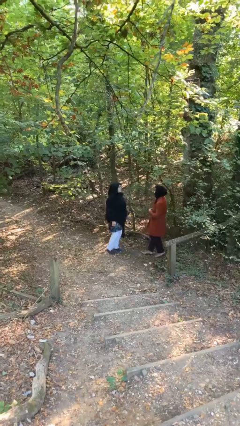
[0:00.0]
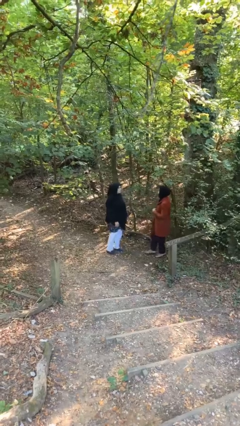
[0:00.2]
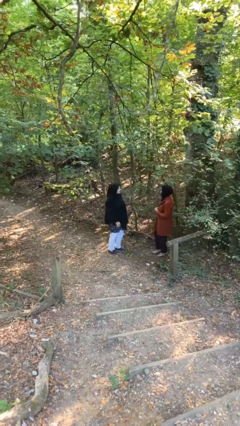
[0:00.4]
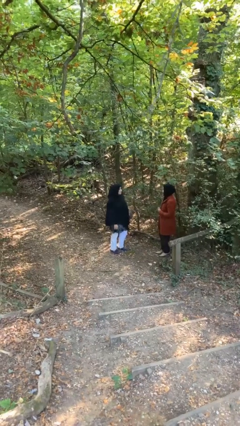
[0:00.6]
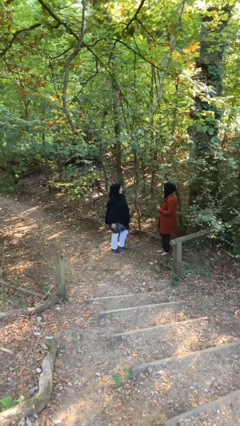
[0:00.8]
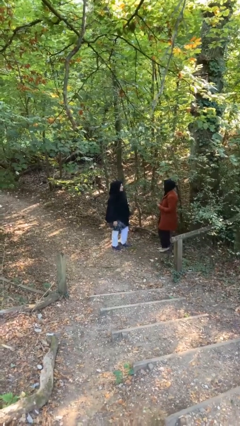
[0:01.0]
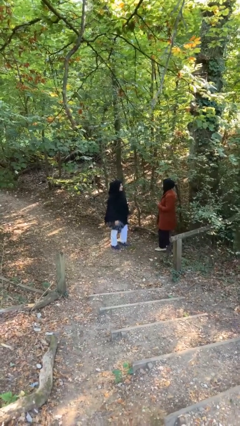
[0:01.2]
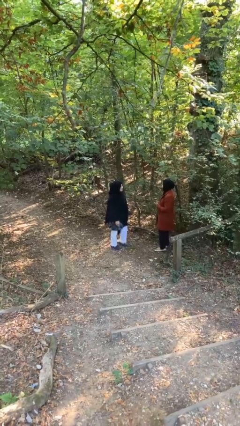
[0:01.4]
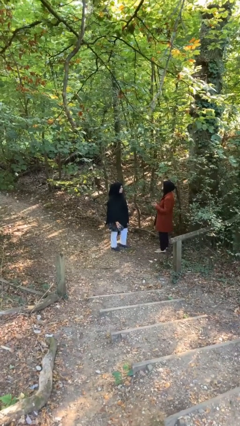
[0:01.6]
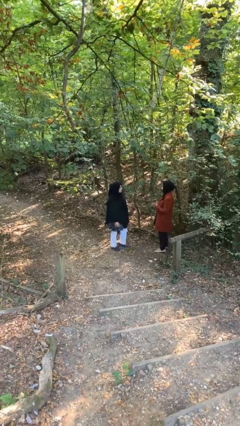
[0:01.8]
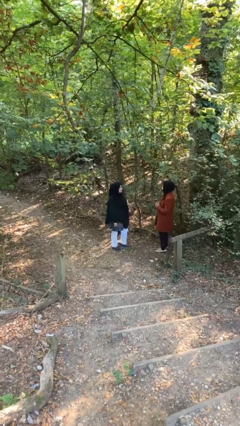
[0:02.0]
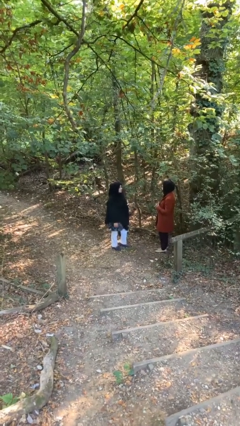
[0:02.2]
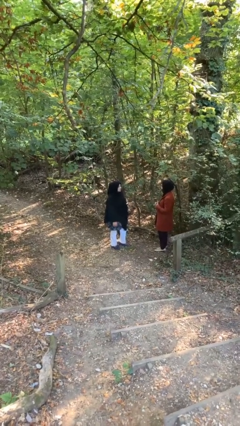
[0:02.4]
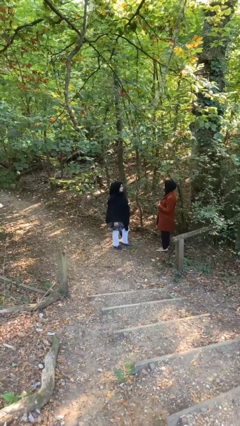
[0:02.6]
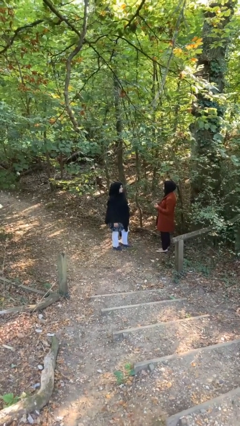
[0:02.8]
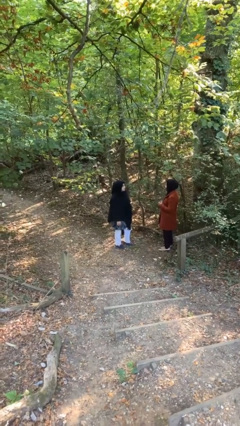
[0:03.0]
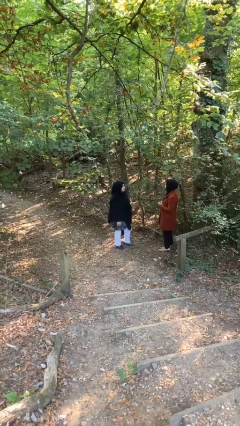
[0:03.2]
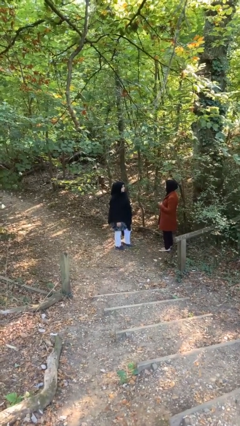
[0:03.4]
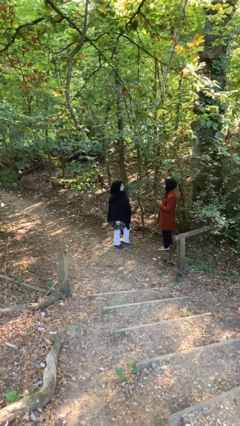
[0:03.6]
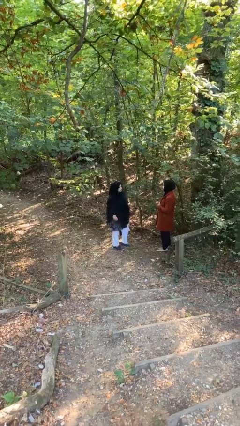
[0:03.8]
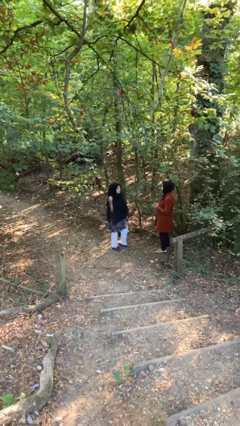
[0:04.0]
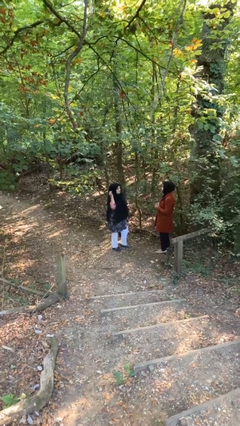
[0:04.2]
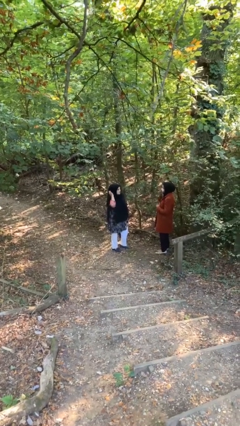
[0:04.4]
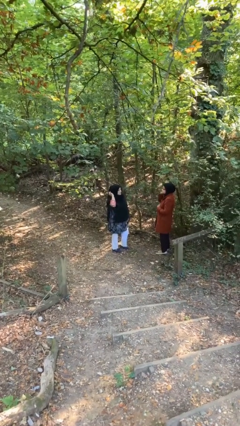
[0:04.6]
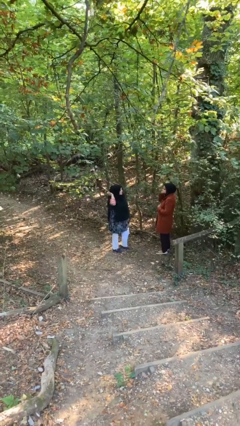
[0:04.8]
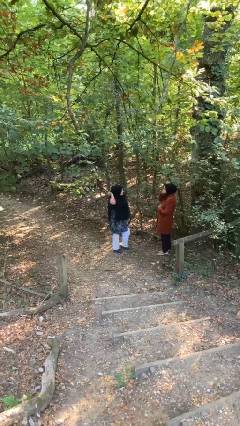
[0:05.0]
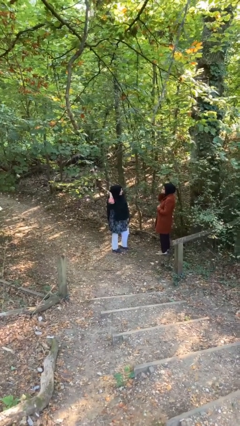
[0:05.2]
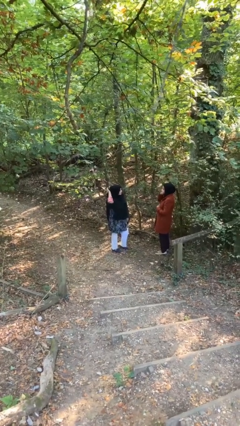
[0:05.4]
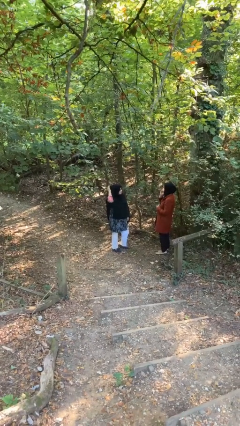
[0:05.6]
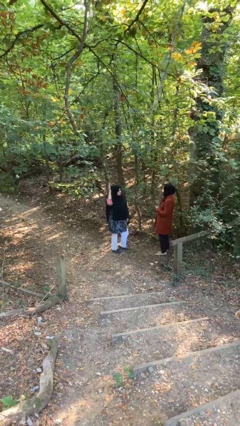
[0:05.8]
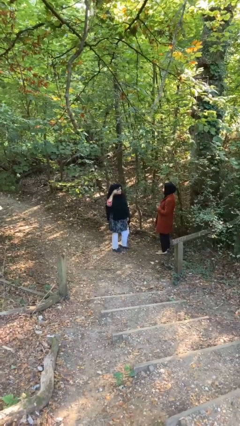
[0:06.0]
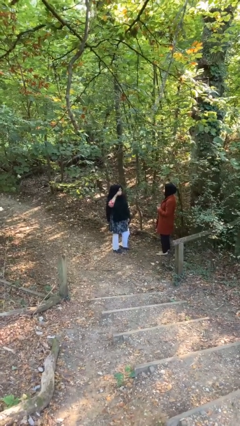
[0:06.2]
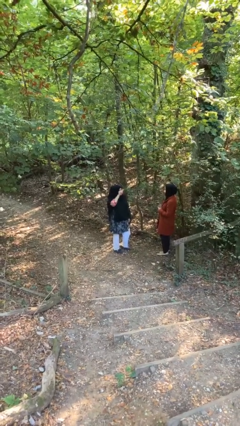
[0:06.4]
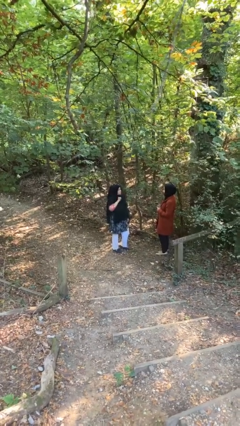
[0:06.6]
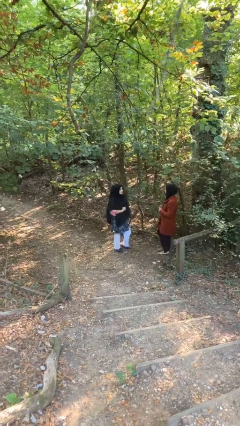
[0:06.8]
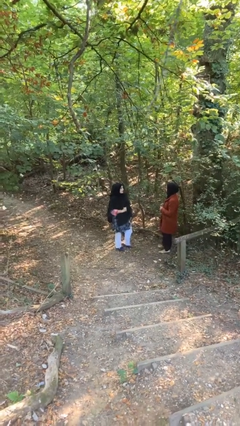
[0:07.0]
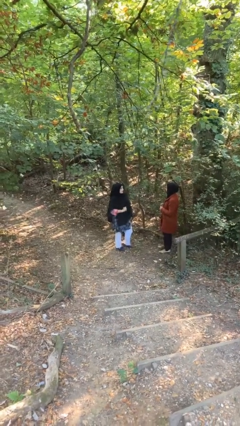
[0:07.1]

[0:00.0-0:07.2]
person talks to person

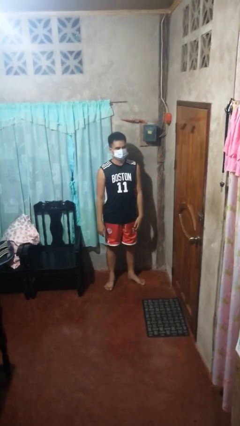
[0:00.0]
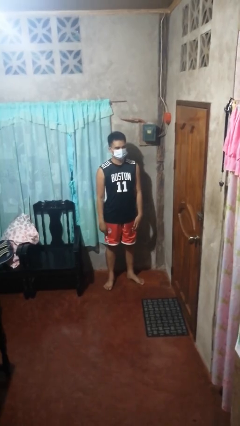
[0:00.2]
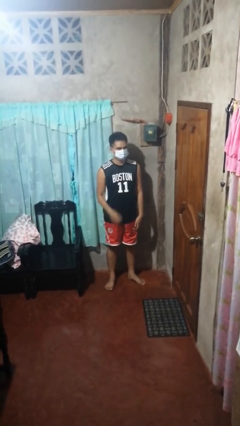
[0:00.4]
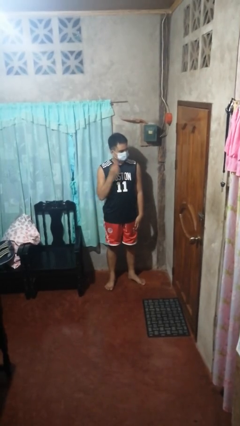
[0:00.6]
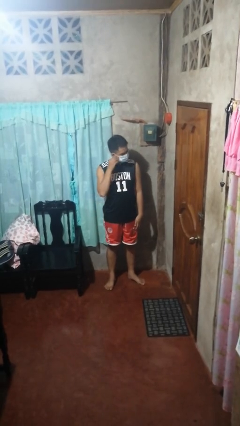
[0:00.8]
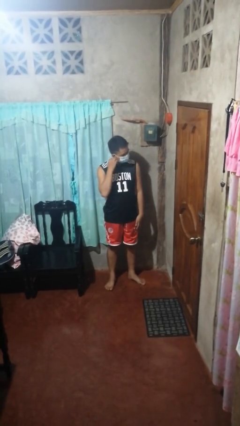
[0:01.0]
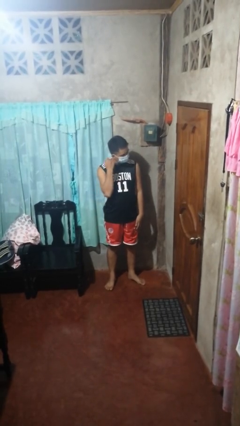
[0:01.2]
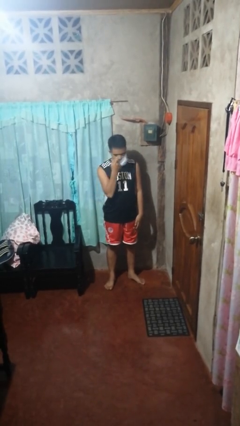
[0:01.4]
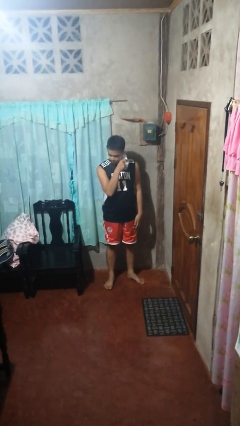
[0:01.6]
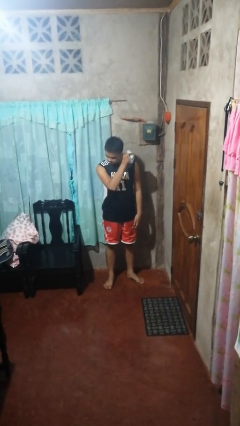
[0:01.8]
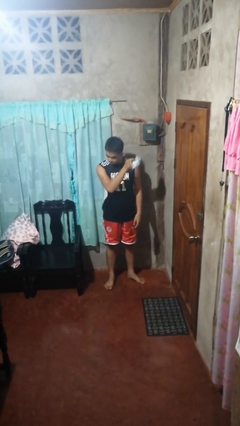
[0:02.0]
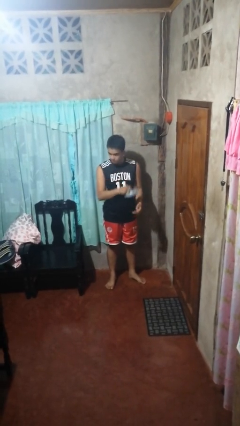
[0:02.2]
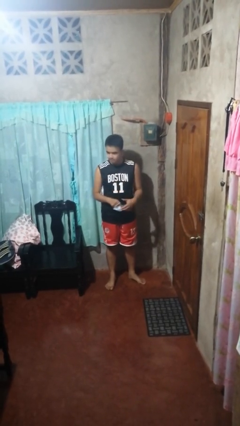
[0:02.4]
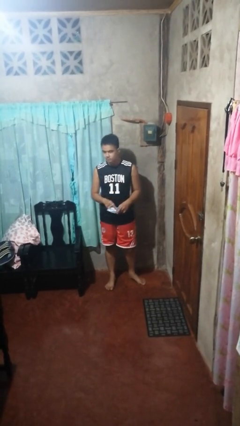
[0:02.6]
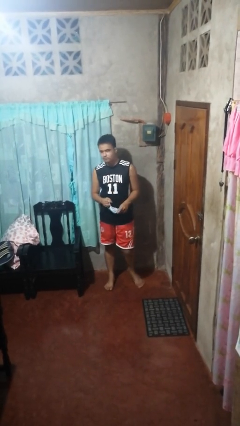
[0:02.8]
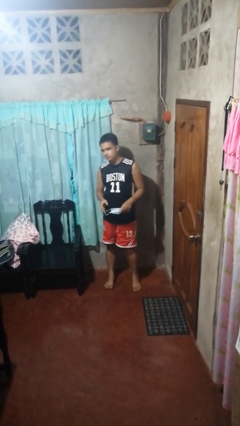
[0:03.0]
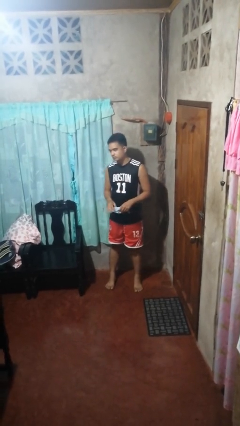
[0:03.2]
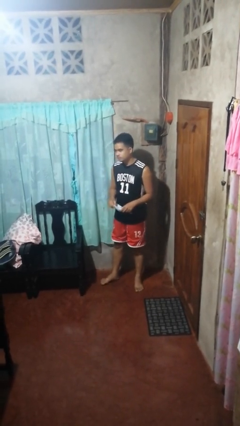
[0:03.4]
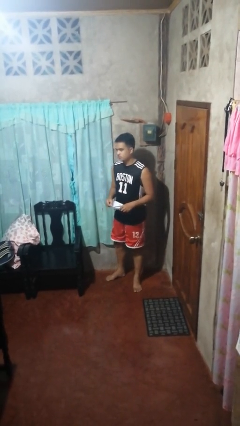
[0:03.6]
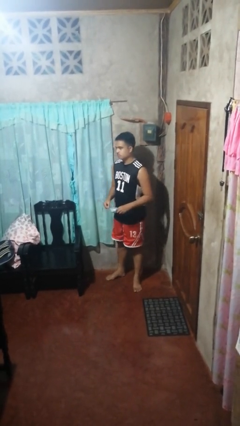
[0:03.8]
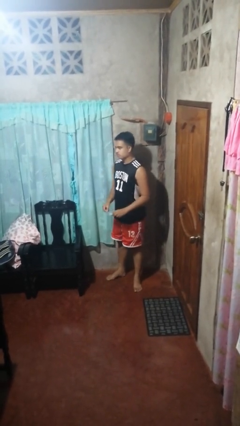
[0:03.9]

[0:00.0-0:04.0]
person takes off facemask

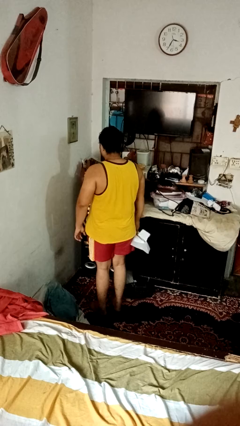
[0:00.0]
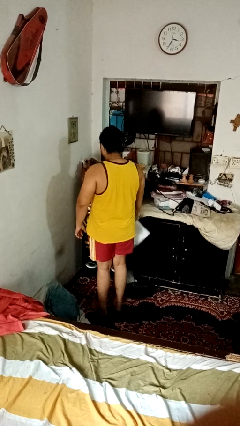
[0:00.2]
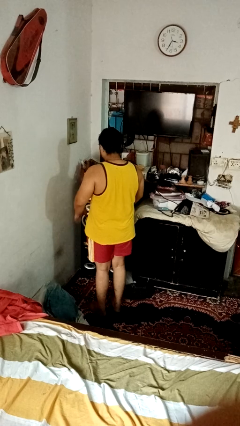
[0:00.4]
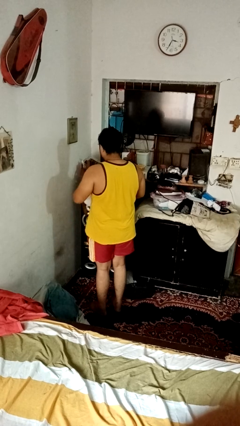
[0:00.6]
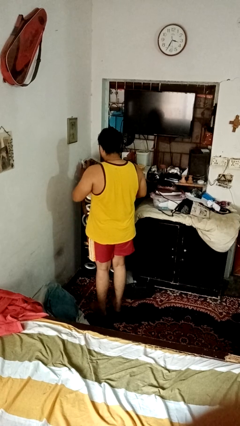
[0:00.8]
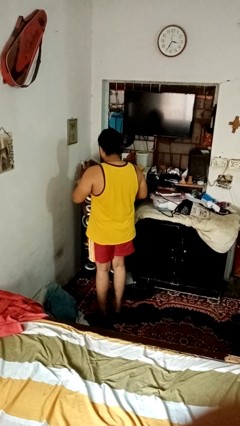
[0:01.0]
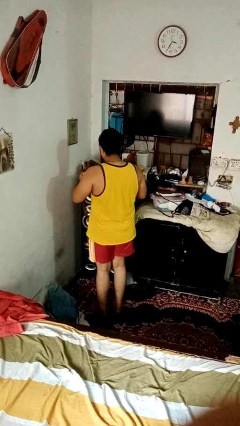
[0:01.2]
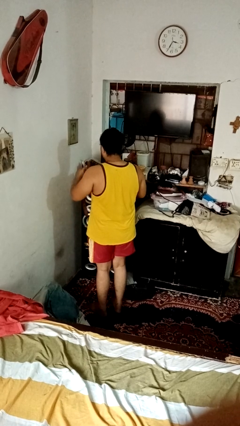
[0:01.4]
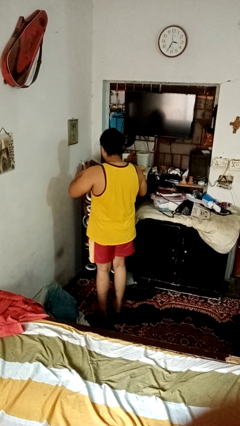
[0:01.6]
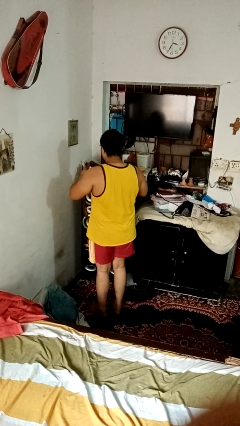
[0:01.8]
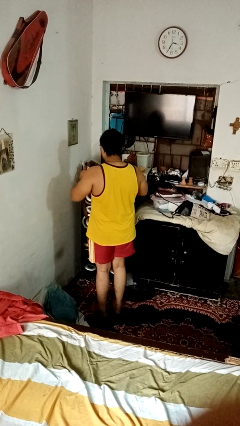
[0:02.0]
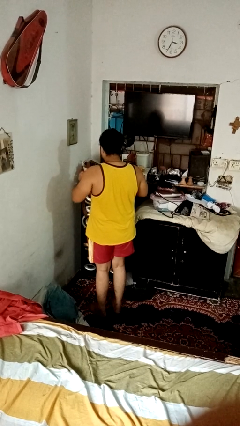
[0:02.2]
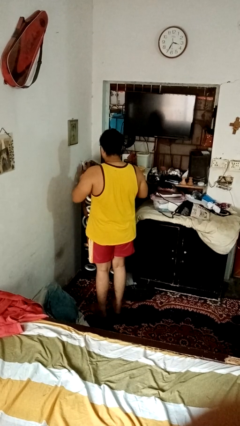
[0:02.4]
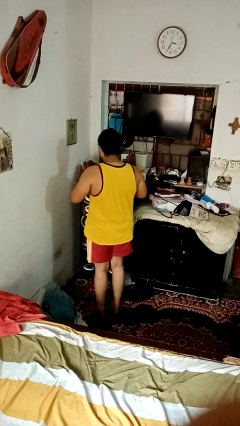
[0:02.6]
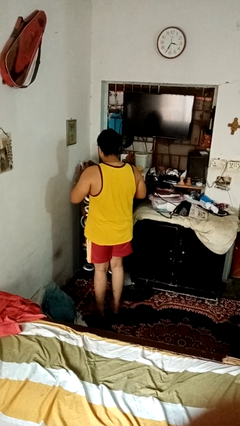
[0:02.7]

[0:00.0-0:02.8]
person tears paper

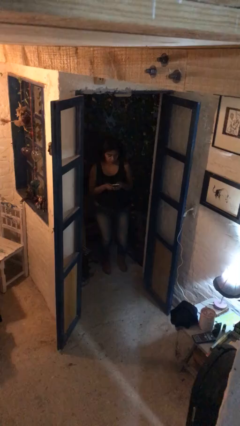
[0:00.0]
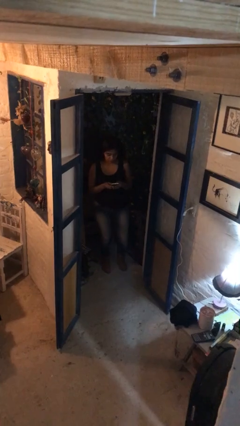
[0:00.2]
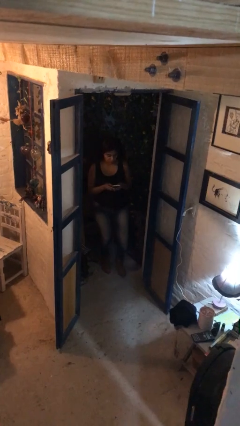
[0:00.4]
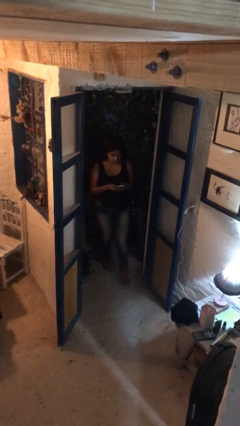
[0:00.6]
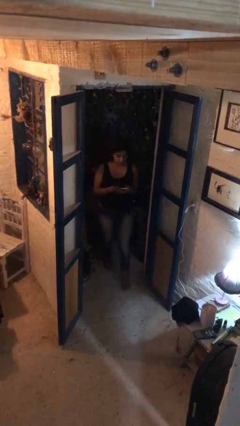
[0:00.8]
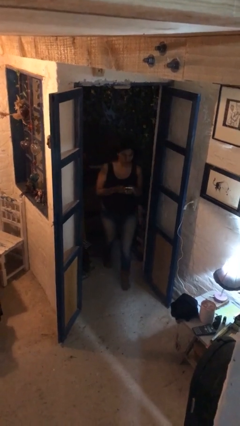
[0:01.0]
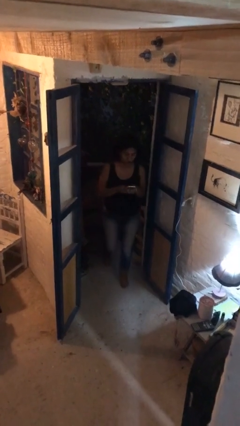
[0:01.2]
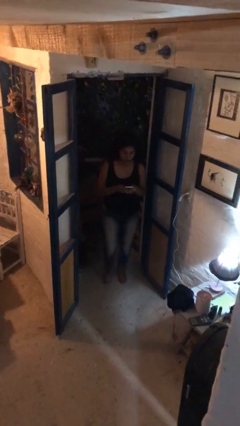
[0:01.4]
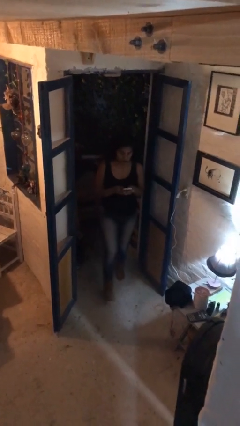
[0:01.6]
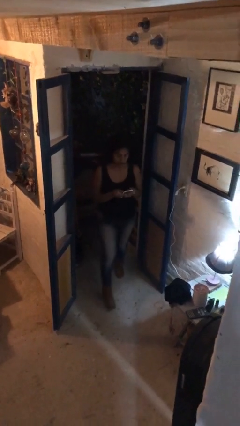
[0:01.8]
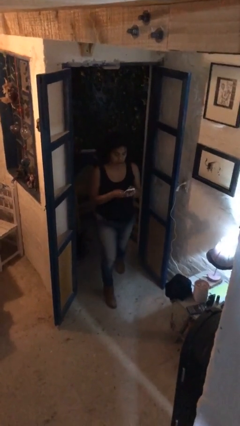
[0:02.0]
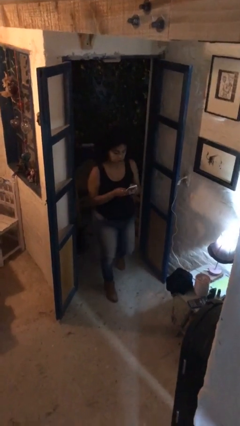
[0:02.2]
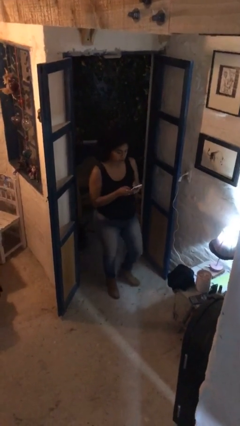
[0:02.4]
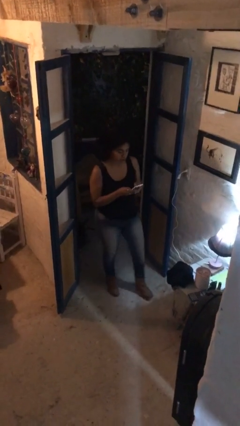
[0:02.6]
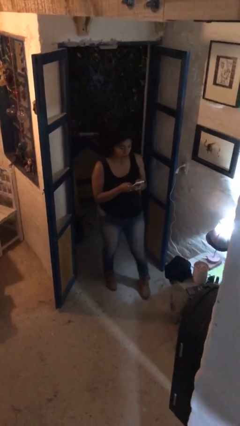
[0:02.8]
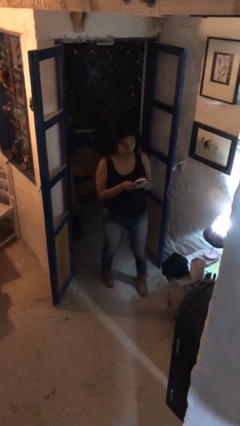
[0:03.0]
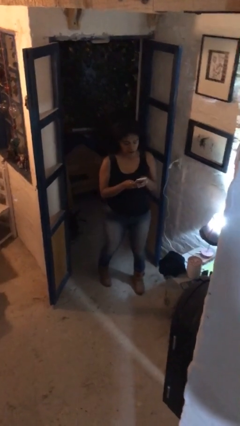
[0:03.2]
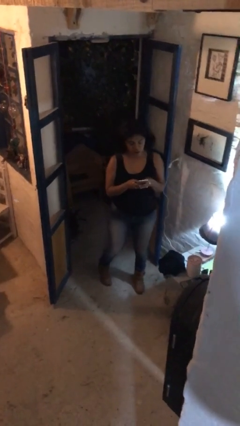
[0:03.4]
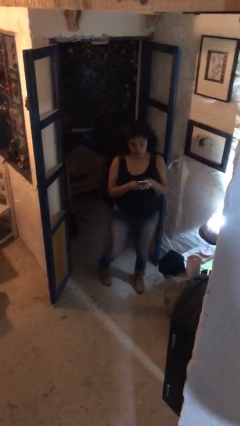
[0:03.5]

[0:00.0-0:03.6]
person enters scene through structure

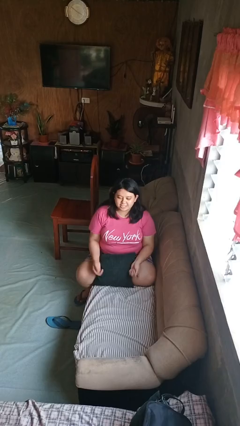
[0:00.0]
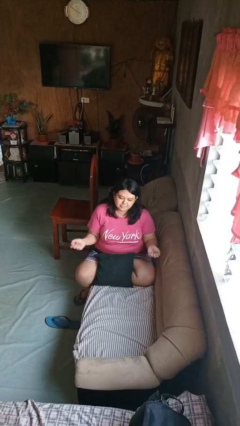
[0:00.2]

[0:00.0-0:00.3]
person shrugs
